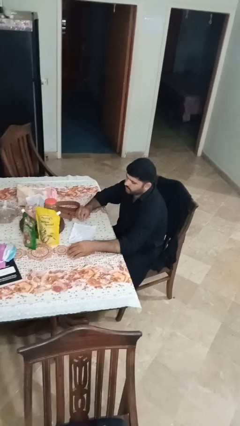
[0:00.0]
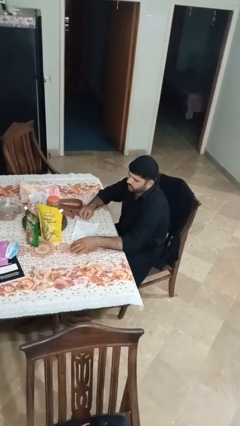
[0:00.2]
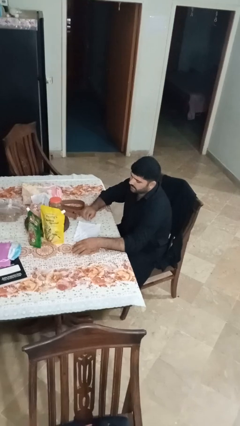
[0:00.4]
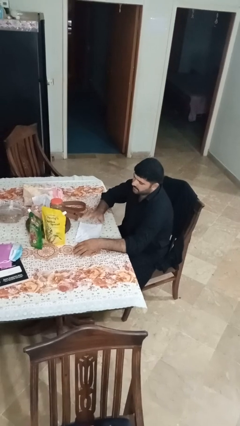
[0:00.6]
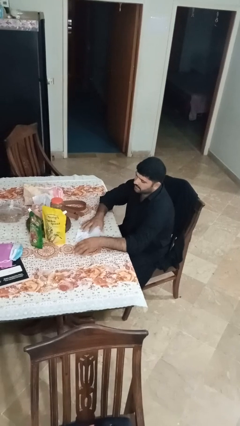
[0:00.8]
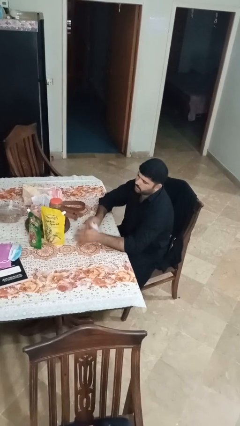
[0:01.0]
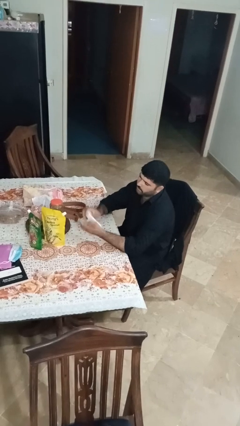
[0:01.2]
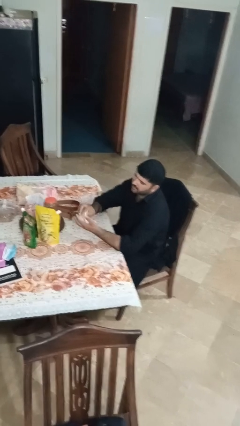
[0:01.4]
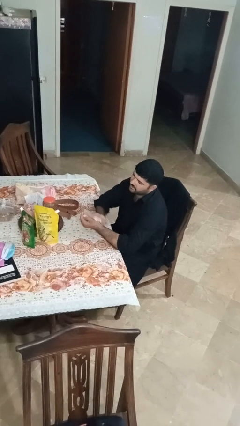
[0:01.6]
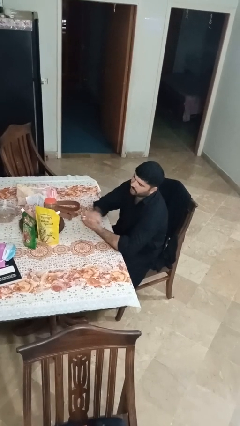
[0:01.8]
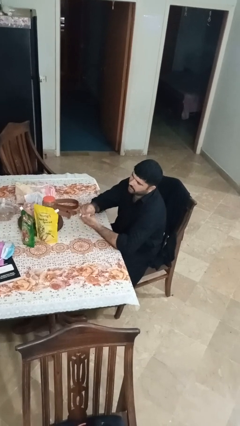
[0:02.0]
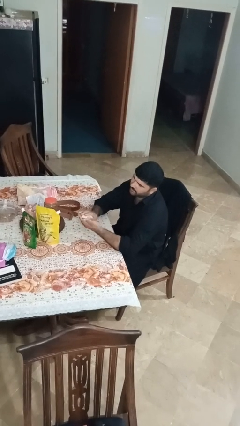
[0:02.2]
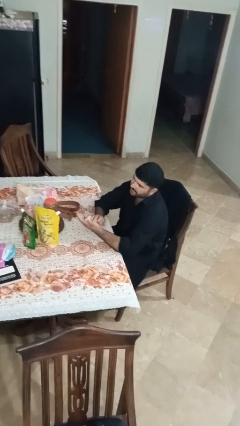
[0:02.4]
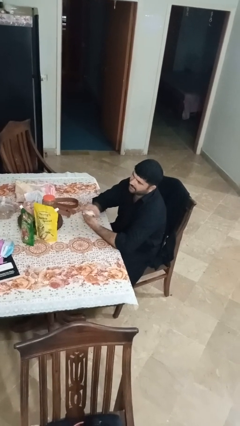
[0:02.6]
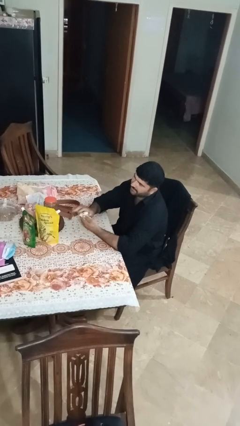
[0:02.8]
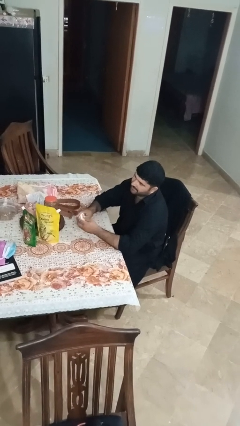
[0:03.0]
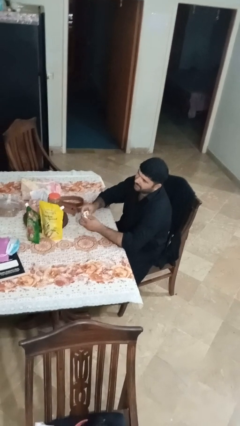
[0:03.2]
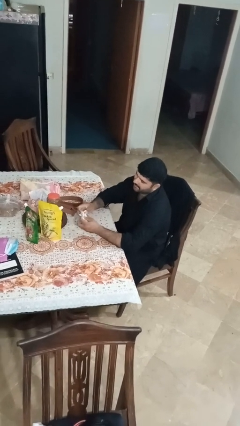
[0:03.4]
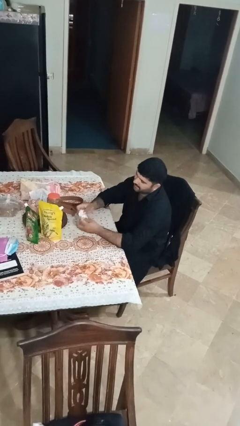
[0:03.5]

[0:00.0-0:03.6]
person crumples paper

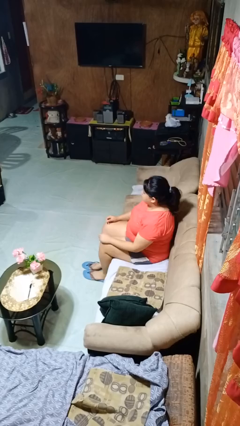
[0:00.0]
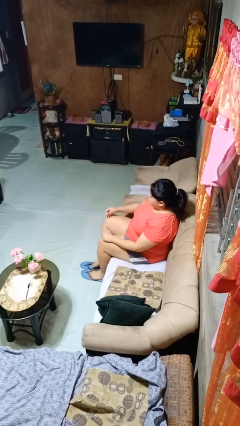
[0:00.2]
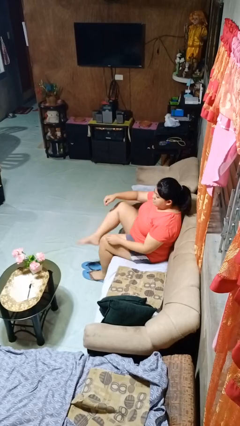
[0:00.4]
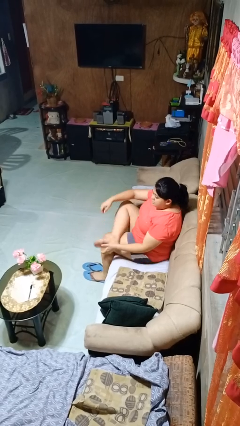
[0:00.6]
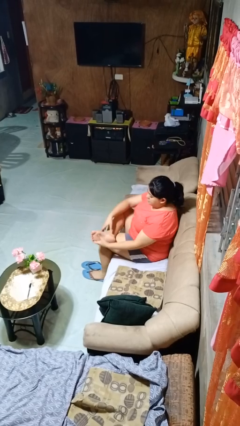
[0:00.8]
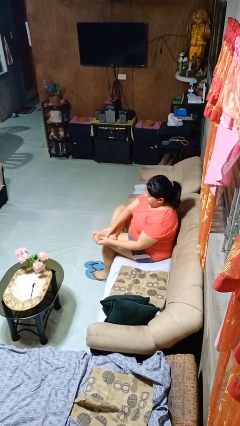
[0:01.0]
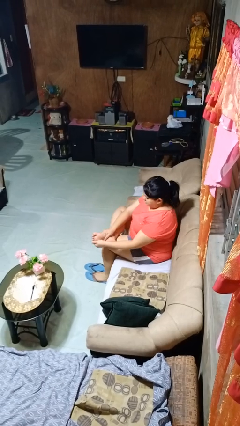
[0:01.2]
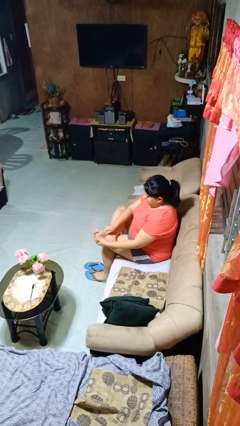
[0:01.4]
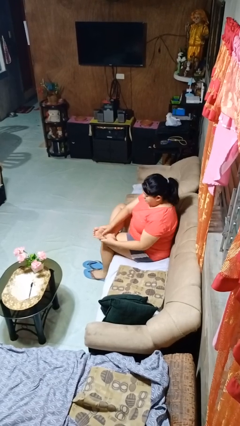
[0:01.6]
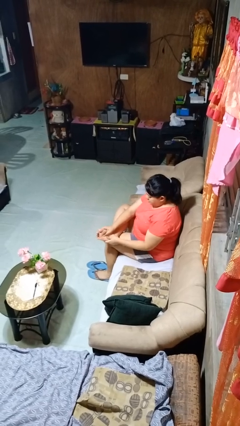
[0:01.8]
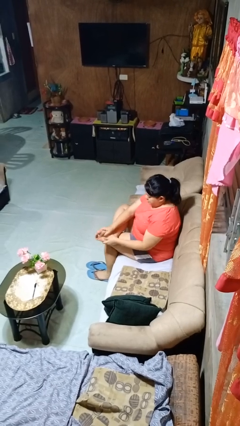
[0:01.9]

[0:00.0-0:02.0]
person rubs foot

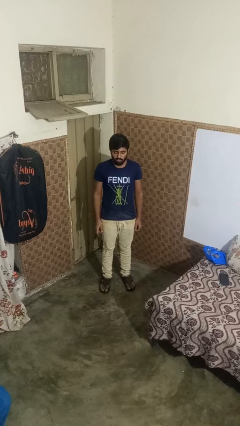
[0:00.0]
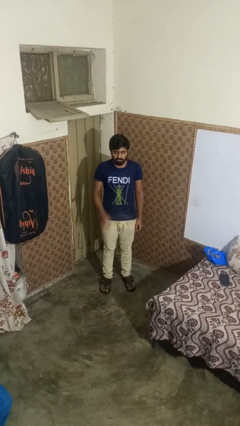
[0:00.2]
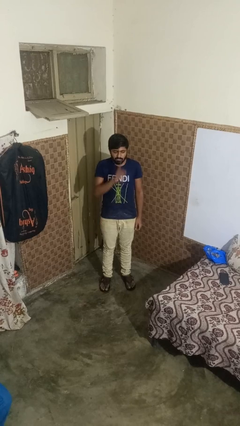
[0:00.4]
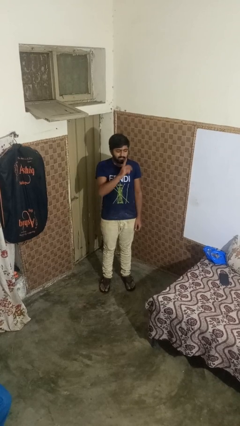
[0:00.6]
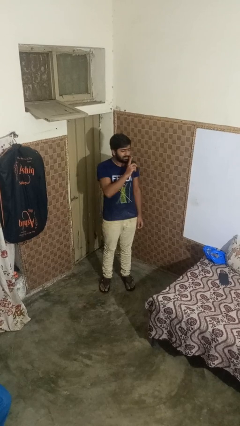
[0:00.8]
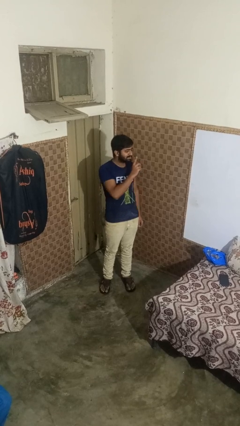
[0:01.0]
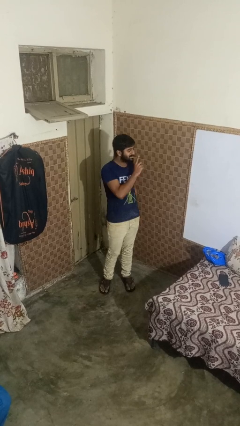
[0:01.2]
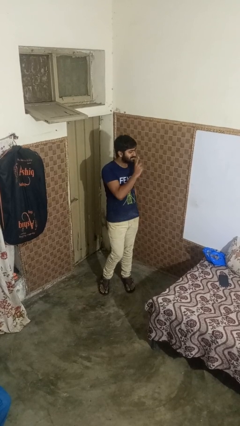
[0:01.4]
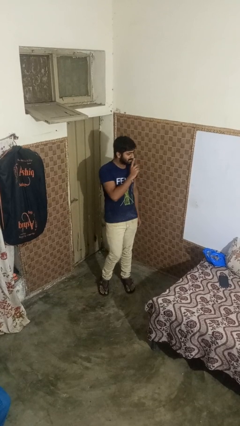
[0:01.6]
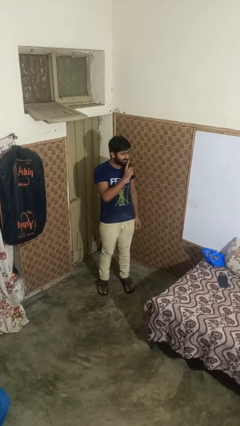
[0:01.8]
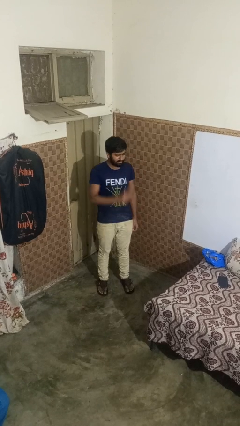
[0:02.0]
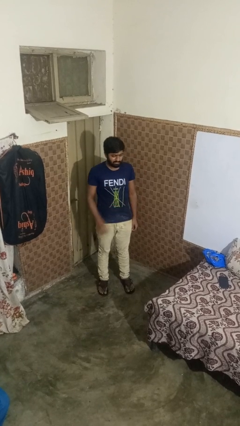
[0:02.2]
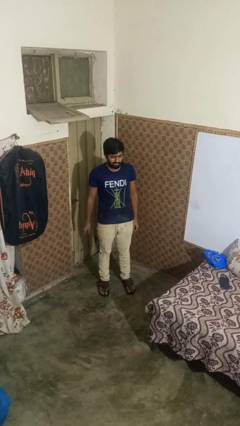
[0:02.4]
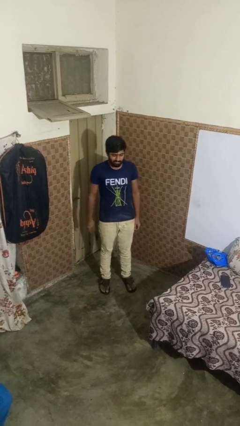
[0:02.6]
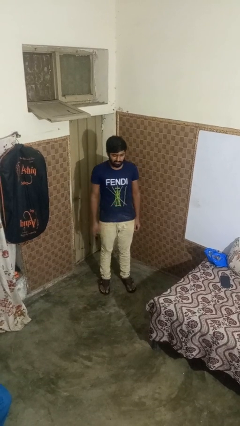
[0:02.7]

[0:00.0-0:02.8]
person gestures be quiet

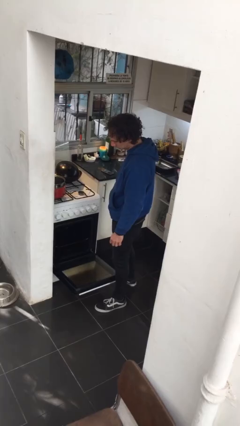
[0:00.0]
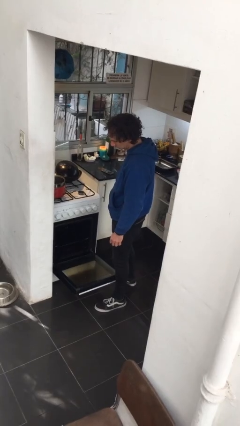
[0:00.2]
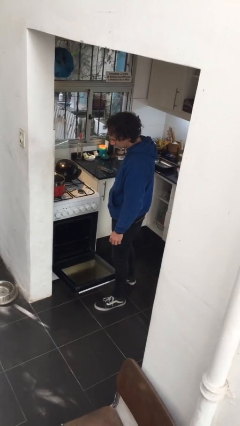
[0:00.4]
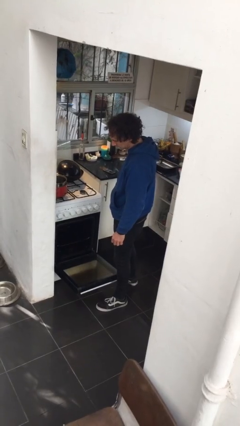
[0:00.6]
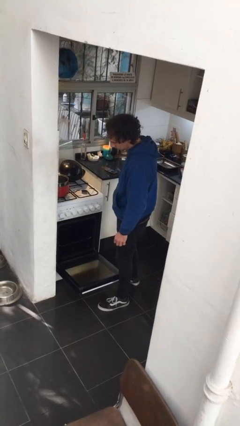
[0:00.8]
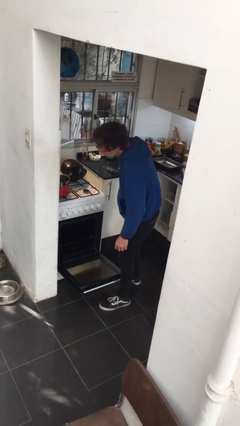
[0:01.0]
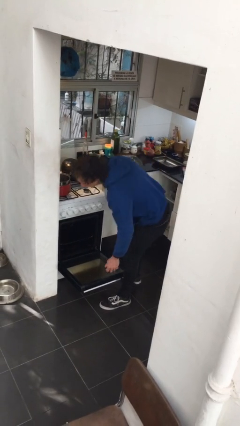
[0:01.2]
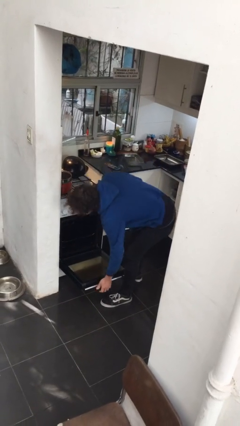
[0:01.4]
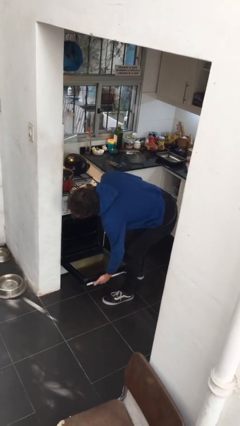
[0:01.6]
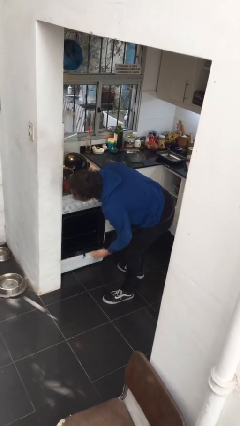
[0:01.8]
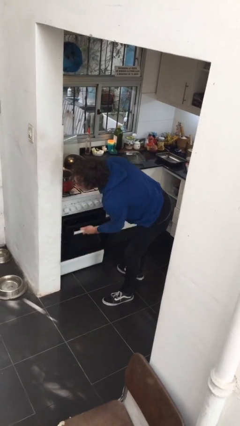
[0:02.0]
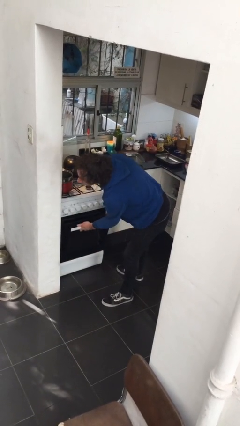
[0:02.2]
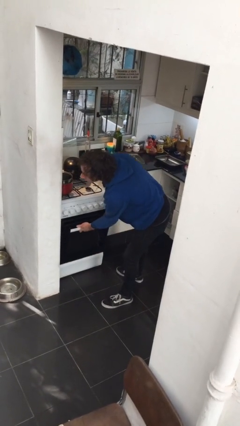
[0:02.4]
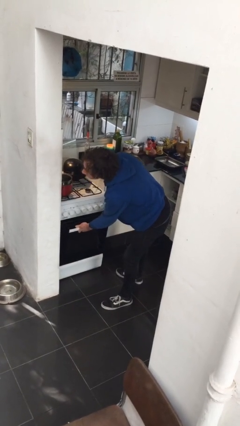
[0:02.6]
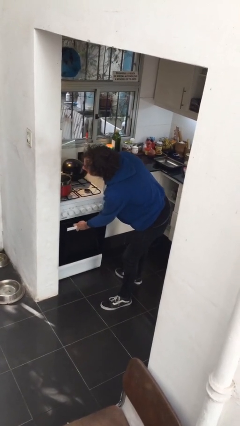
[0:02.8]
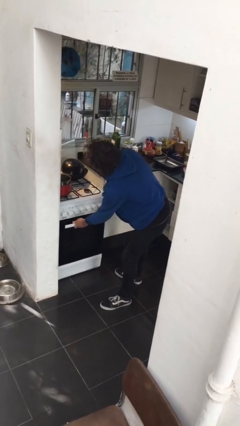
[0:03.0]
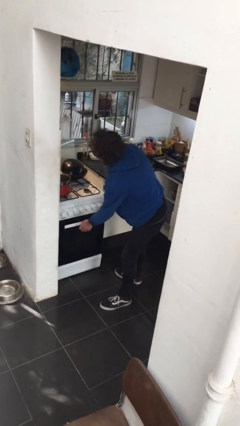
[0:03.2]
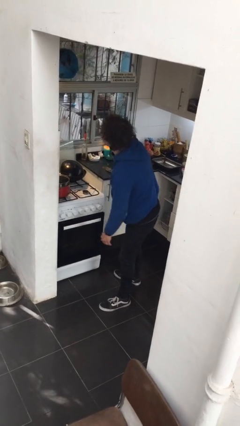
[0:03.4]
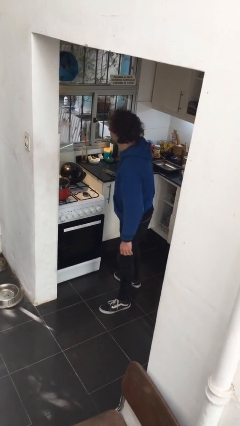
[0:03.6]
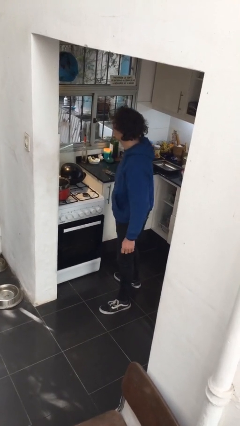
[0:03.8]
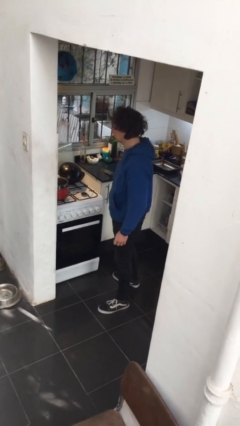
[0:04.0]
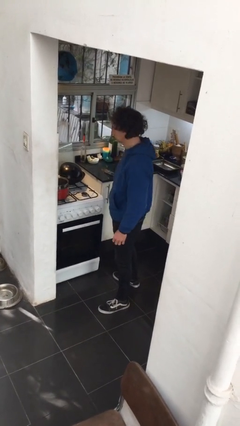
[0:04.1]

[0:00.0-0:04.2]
person closes oven door

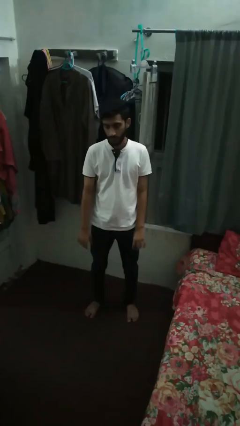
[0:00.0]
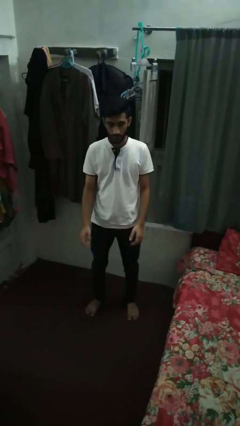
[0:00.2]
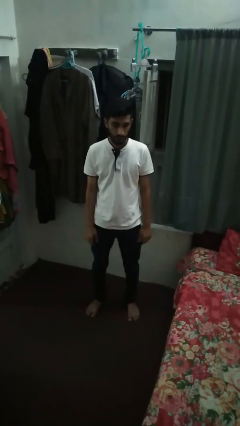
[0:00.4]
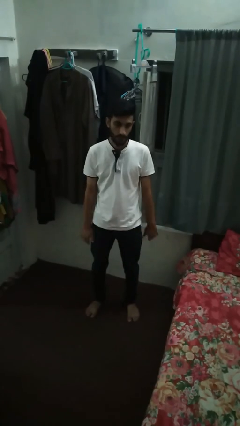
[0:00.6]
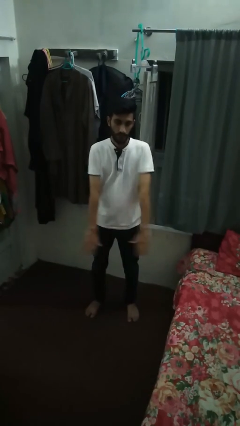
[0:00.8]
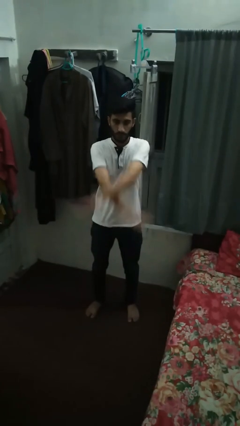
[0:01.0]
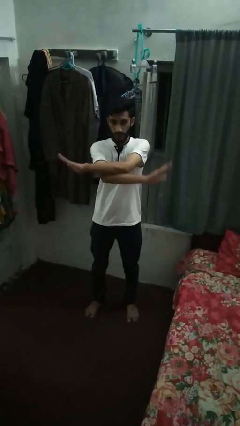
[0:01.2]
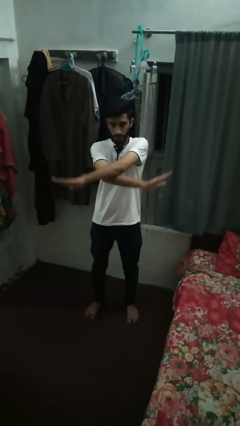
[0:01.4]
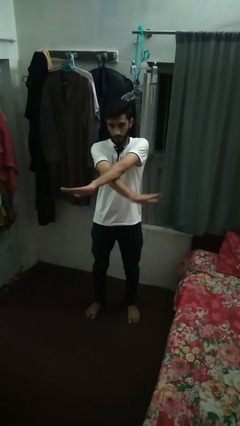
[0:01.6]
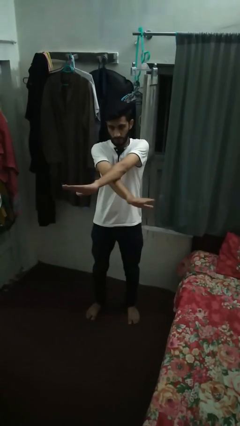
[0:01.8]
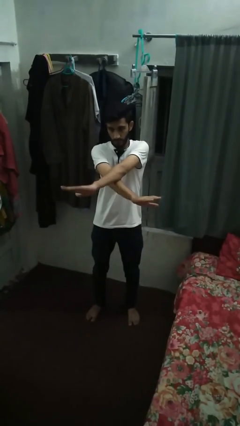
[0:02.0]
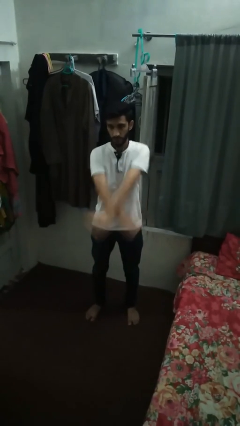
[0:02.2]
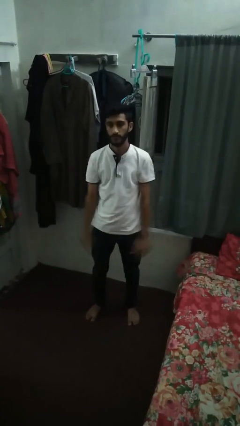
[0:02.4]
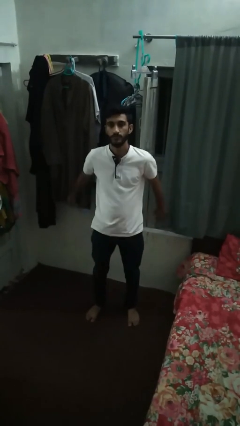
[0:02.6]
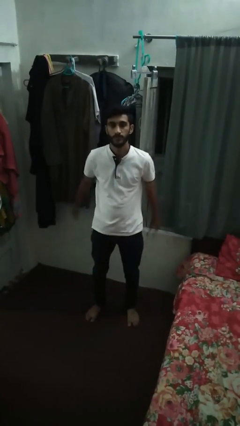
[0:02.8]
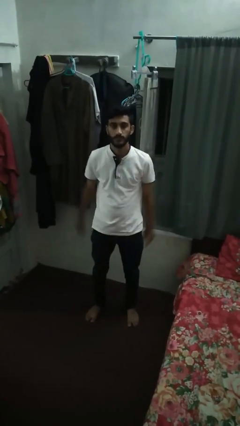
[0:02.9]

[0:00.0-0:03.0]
person gestures arms x

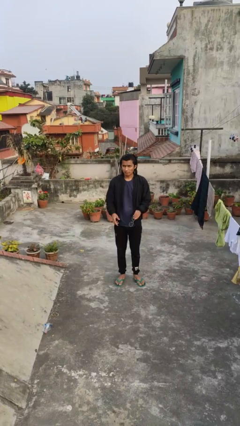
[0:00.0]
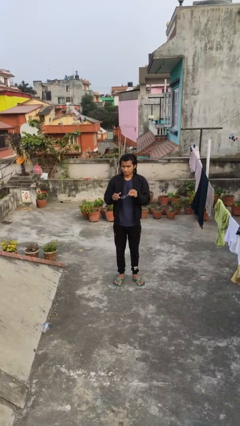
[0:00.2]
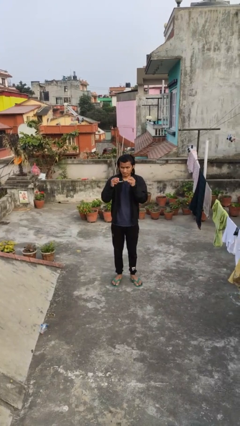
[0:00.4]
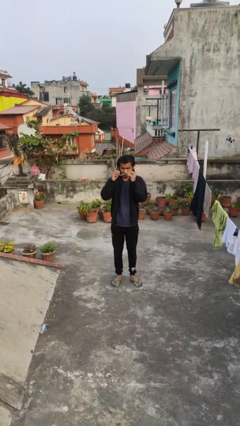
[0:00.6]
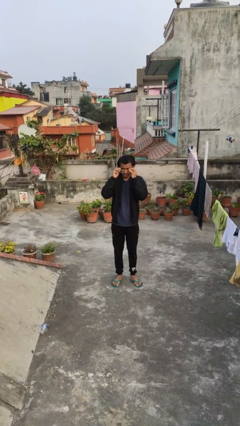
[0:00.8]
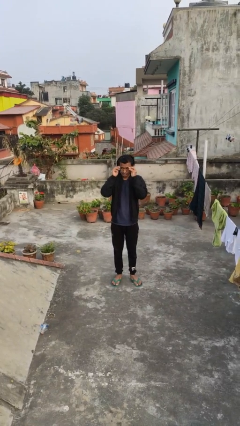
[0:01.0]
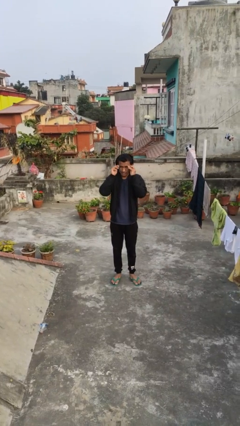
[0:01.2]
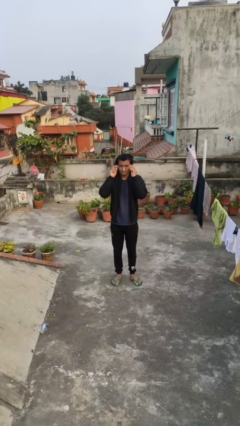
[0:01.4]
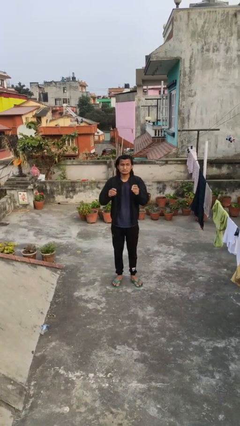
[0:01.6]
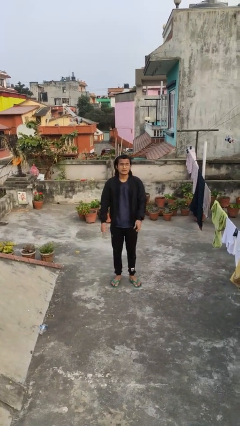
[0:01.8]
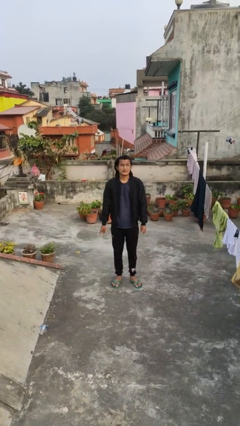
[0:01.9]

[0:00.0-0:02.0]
person puts on glasses
